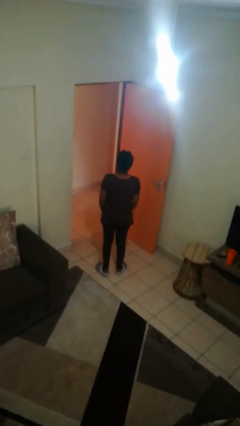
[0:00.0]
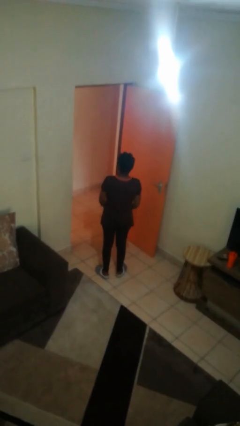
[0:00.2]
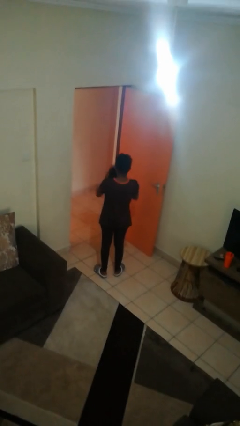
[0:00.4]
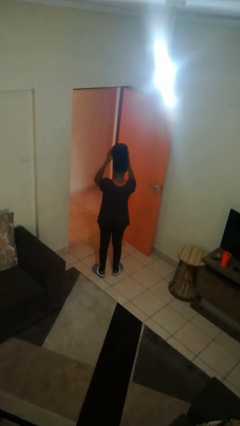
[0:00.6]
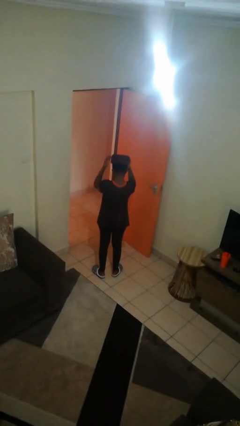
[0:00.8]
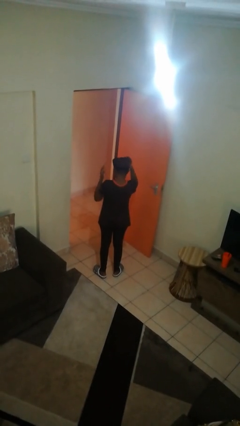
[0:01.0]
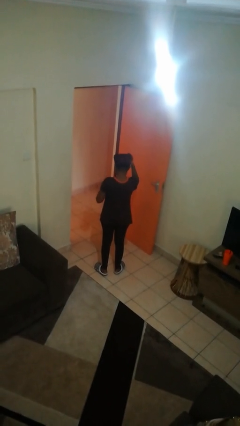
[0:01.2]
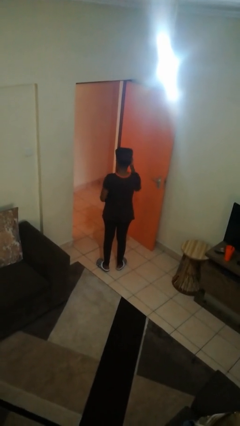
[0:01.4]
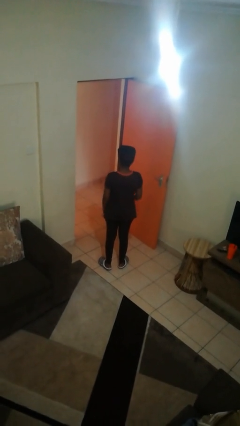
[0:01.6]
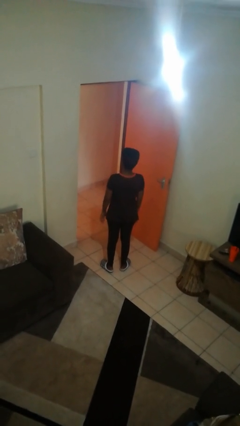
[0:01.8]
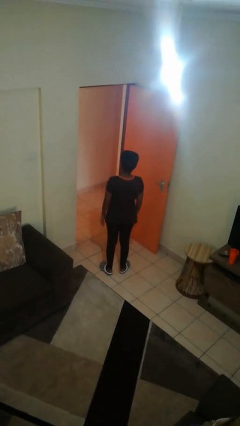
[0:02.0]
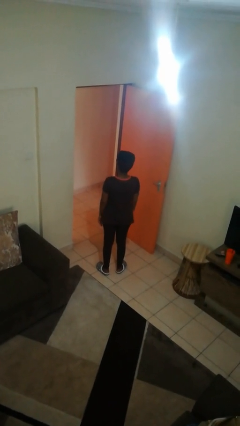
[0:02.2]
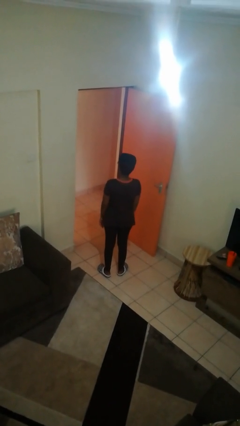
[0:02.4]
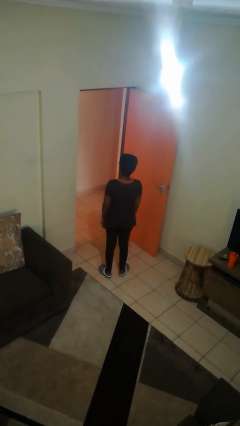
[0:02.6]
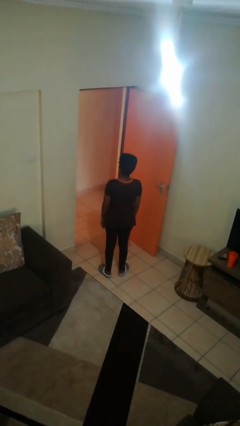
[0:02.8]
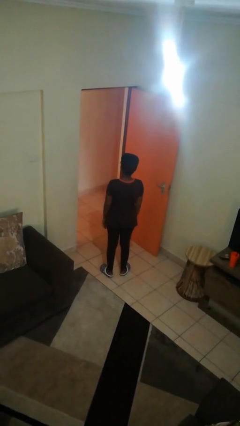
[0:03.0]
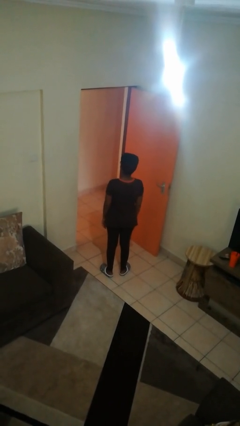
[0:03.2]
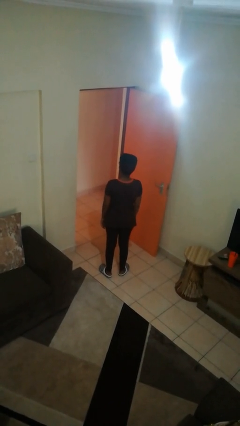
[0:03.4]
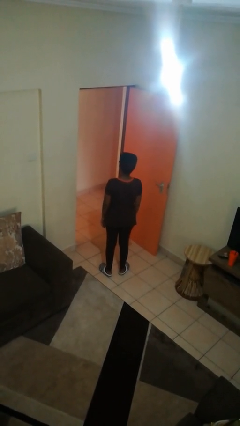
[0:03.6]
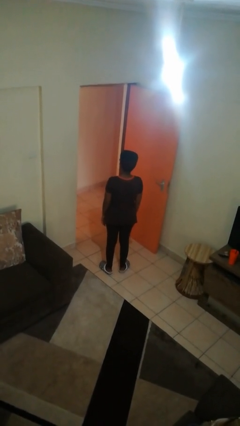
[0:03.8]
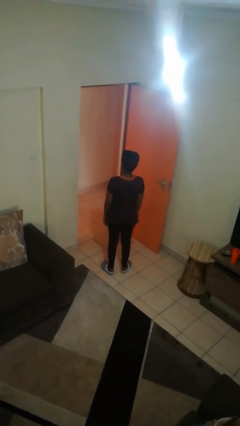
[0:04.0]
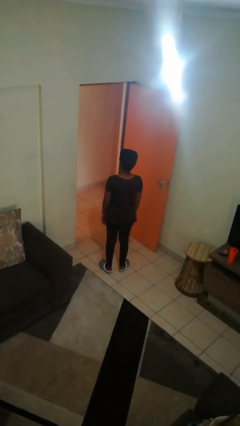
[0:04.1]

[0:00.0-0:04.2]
person puts on hat

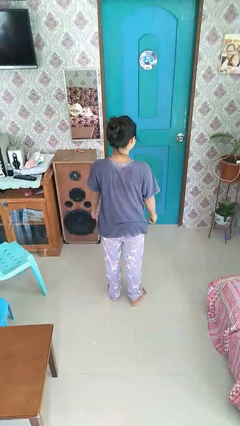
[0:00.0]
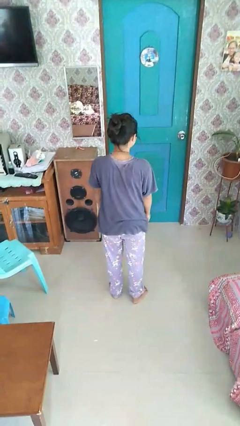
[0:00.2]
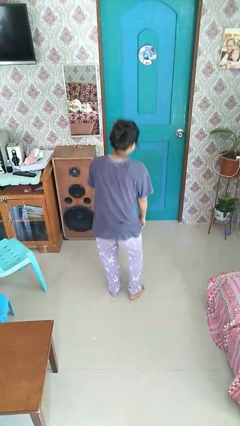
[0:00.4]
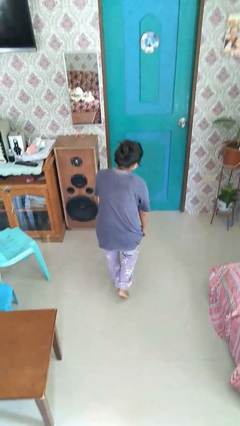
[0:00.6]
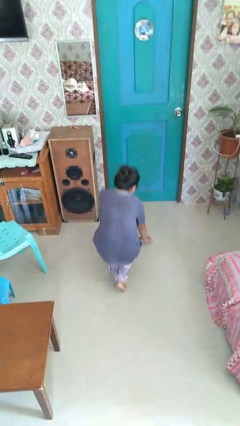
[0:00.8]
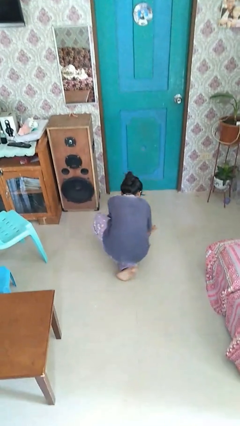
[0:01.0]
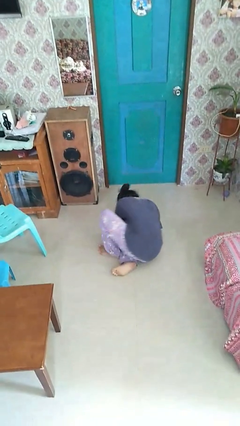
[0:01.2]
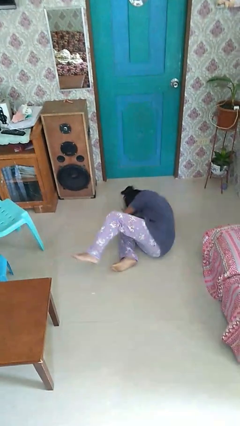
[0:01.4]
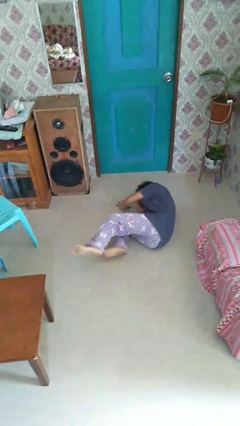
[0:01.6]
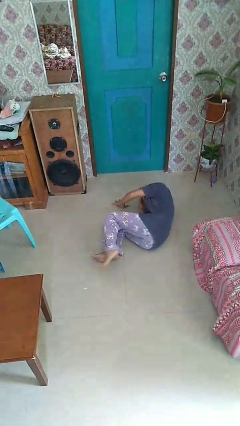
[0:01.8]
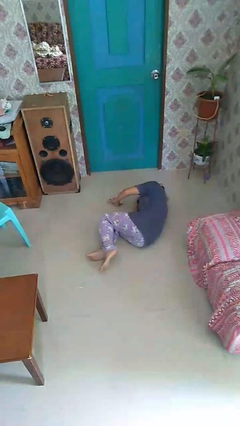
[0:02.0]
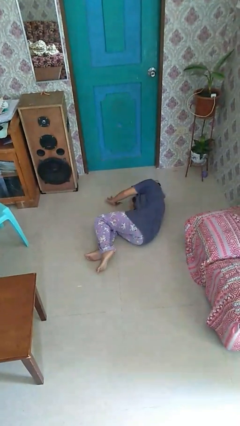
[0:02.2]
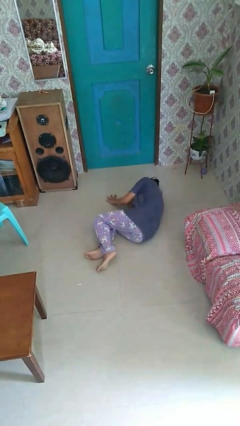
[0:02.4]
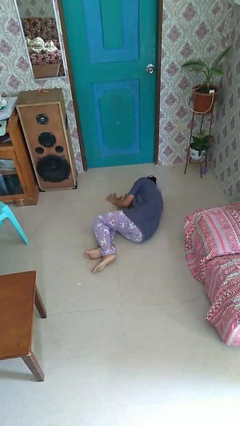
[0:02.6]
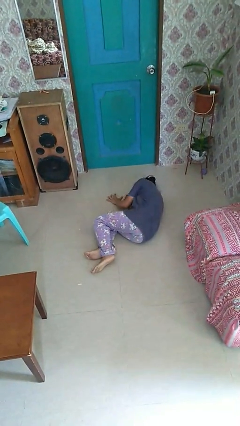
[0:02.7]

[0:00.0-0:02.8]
person falls while standing

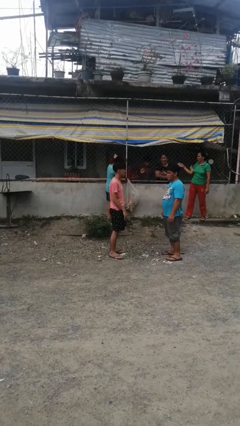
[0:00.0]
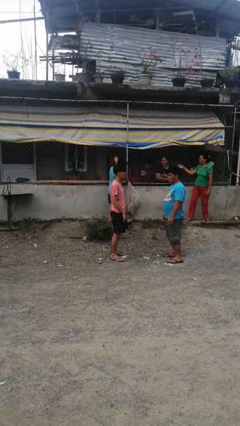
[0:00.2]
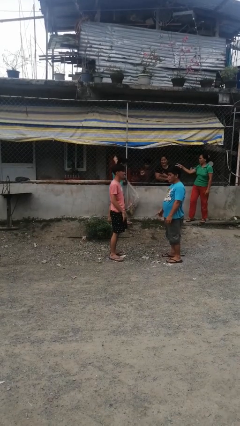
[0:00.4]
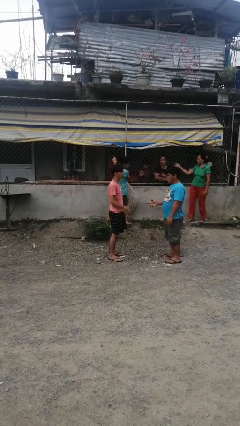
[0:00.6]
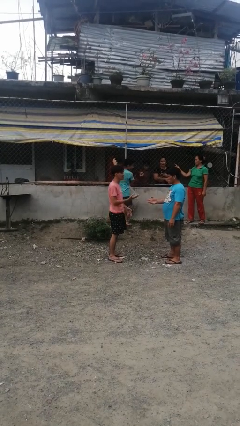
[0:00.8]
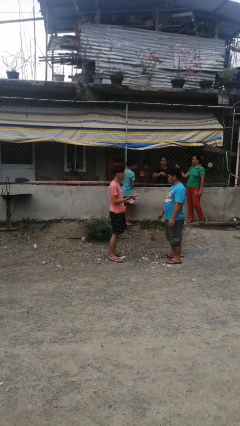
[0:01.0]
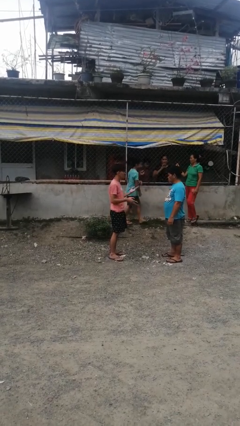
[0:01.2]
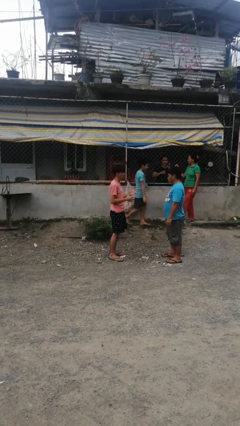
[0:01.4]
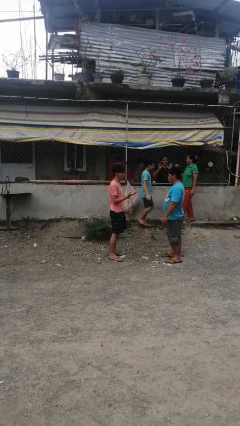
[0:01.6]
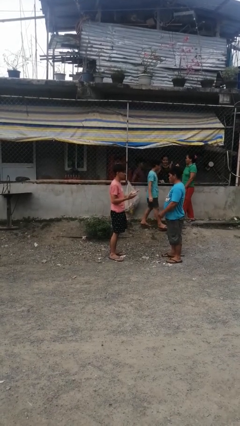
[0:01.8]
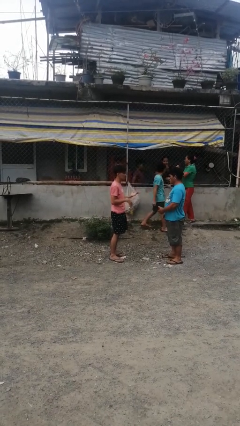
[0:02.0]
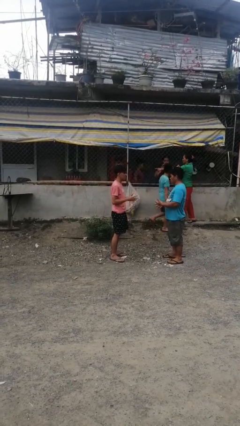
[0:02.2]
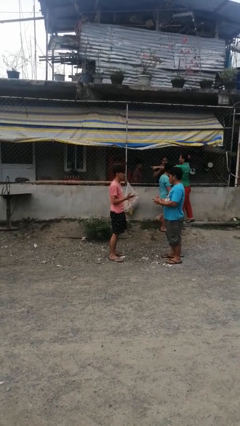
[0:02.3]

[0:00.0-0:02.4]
person talks to person

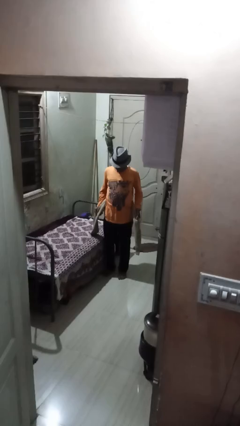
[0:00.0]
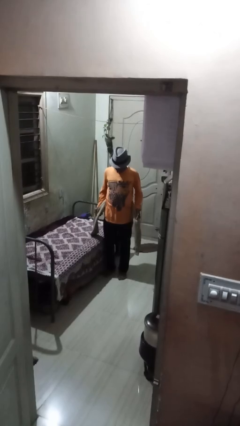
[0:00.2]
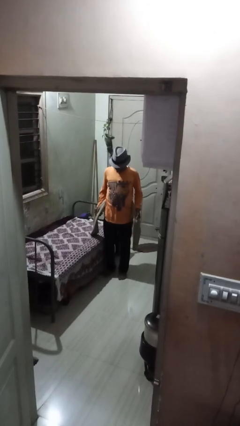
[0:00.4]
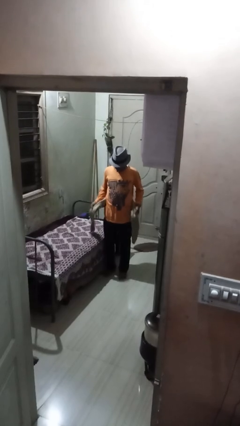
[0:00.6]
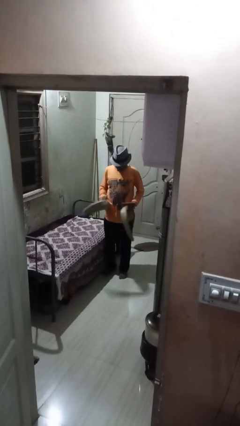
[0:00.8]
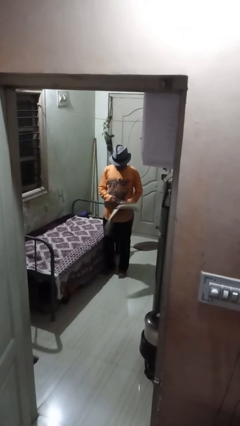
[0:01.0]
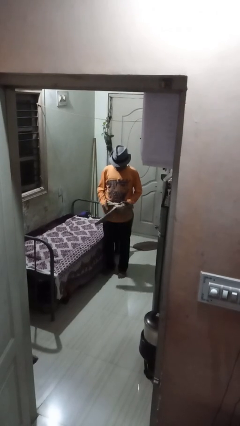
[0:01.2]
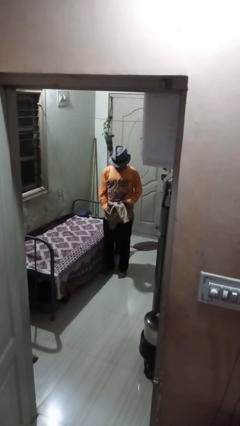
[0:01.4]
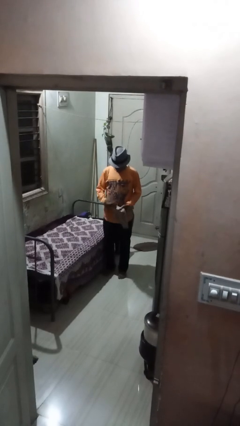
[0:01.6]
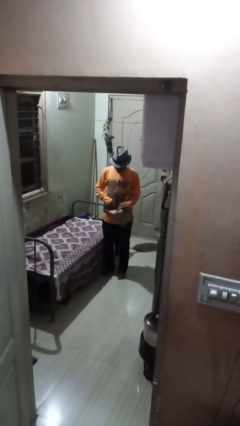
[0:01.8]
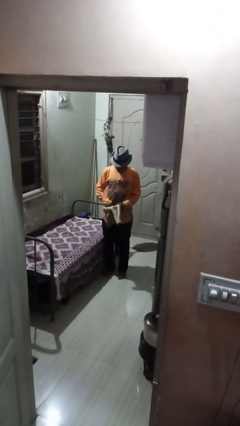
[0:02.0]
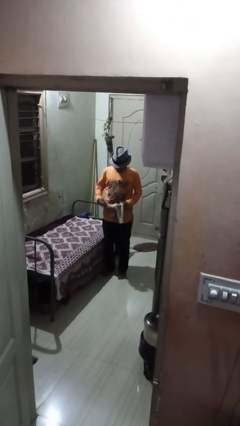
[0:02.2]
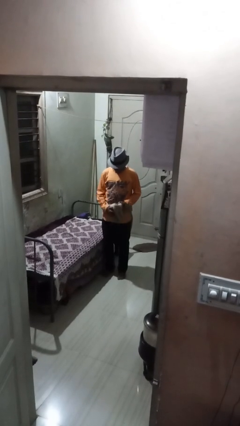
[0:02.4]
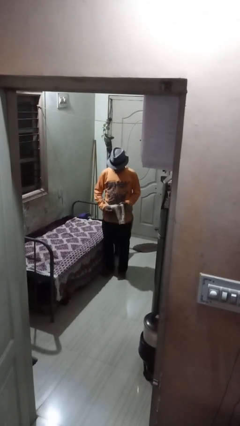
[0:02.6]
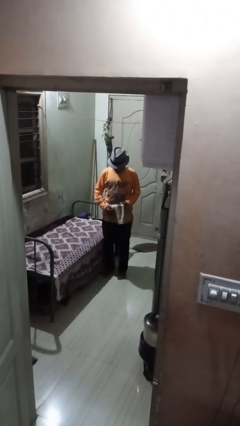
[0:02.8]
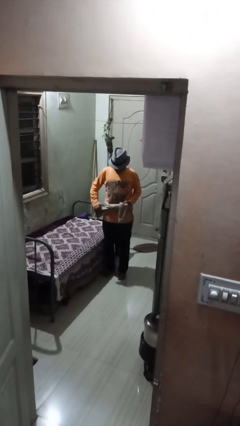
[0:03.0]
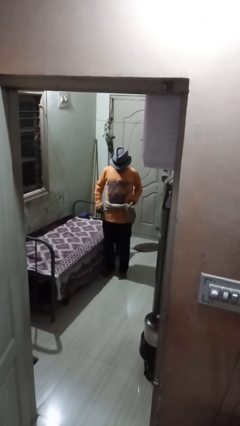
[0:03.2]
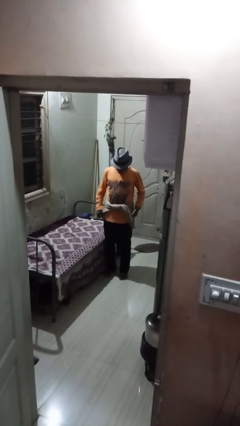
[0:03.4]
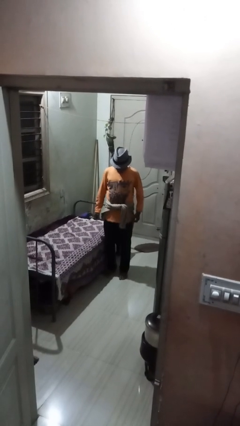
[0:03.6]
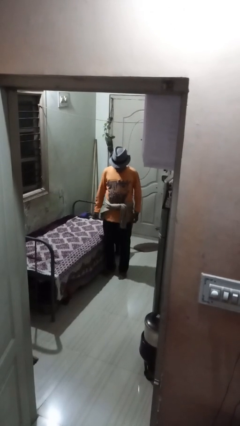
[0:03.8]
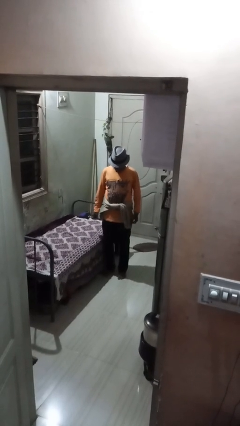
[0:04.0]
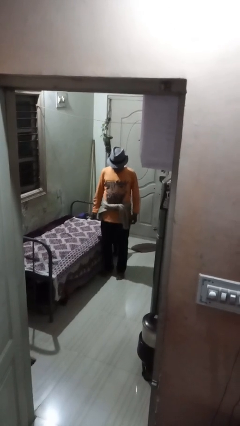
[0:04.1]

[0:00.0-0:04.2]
person ties jacket around waist

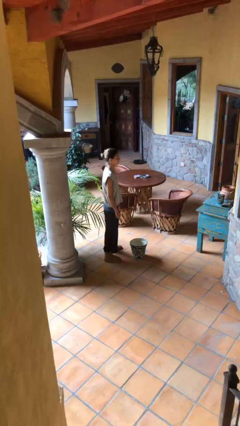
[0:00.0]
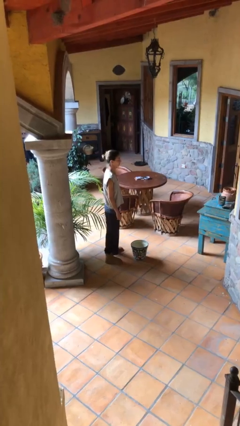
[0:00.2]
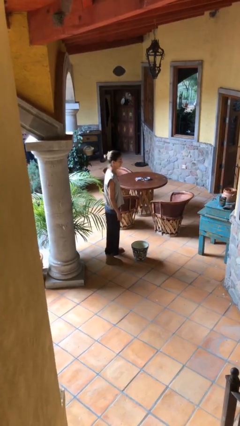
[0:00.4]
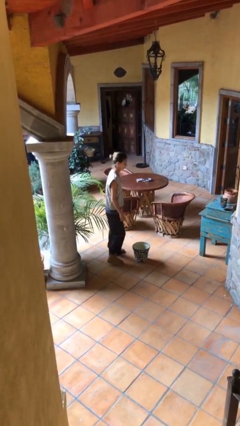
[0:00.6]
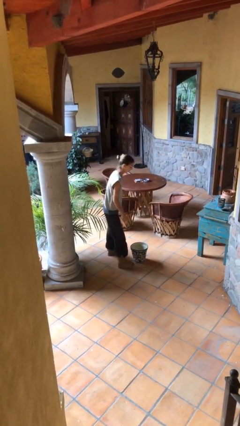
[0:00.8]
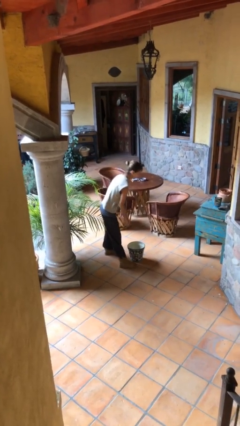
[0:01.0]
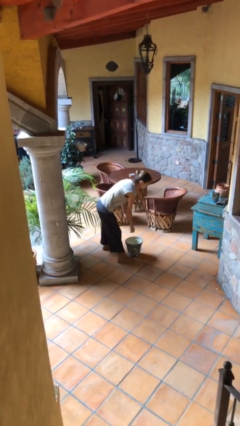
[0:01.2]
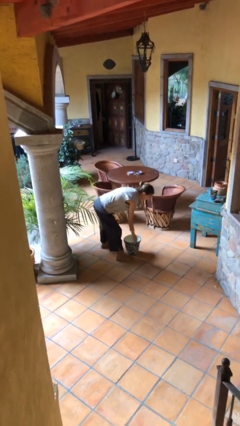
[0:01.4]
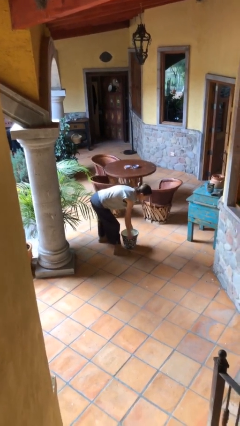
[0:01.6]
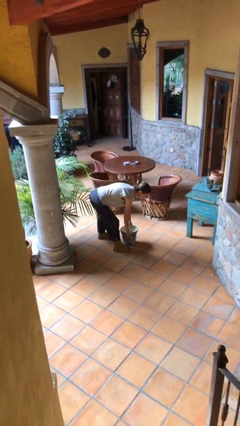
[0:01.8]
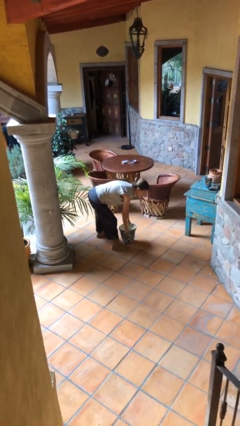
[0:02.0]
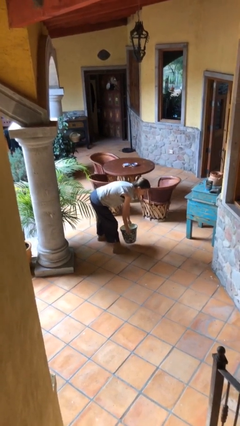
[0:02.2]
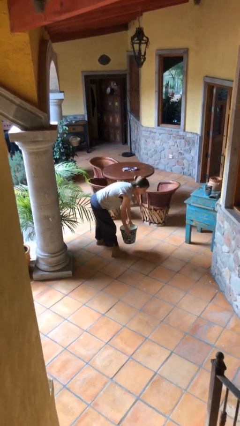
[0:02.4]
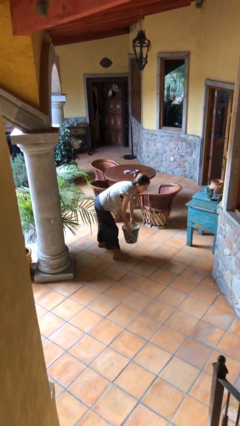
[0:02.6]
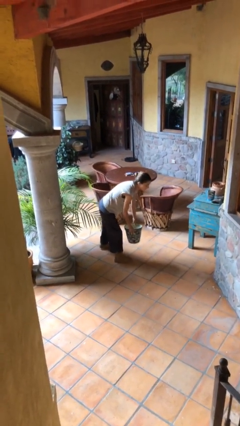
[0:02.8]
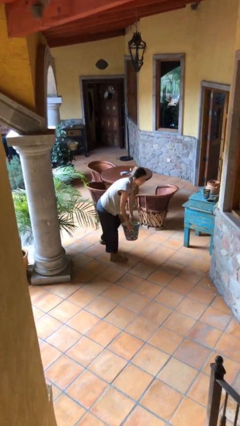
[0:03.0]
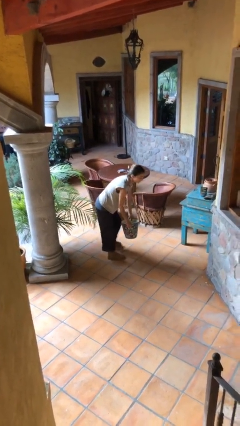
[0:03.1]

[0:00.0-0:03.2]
person picks up object from floor

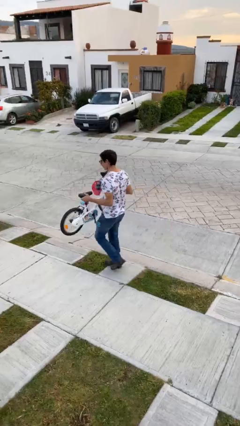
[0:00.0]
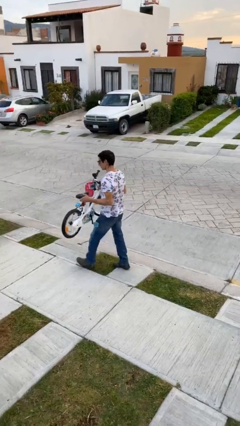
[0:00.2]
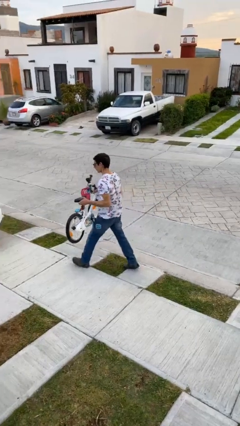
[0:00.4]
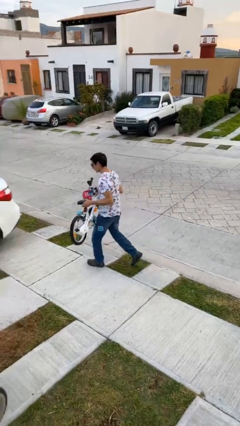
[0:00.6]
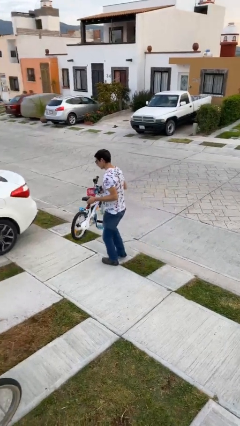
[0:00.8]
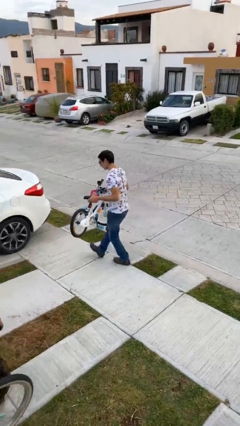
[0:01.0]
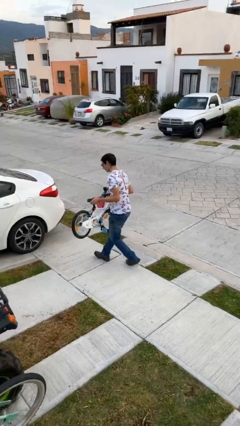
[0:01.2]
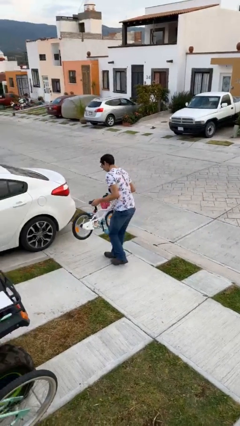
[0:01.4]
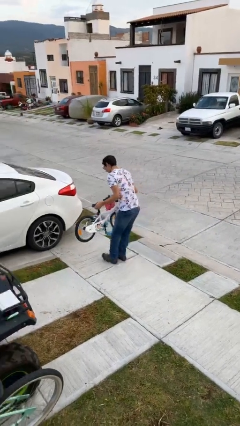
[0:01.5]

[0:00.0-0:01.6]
person carries heavy object
